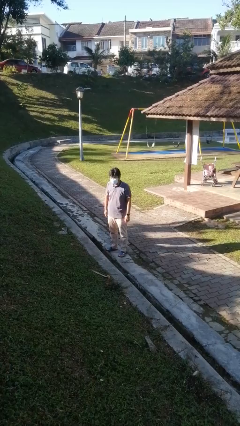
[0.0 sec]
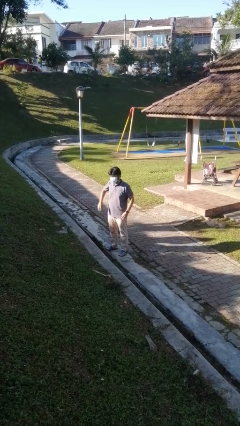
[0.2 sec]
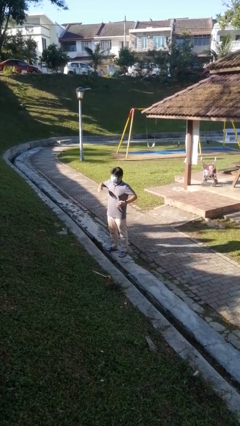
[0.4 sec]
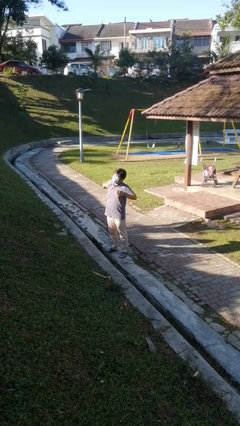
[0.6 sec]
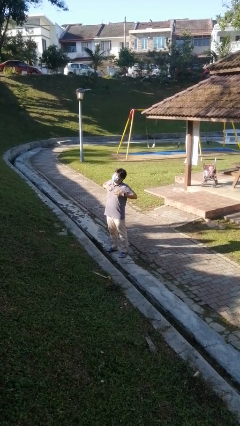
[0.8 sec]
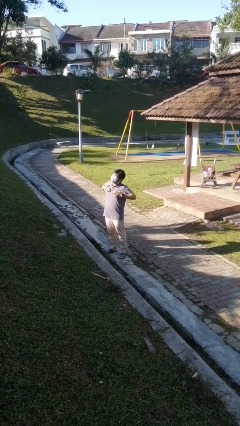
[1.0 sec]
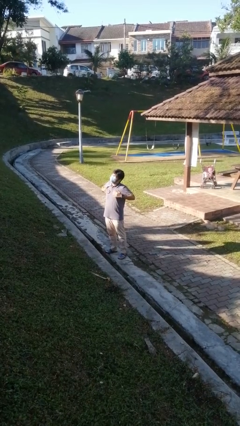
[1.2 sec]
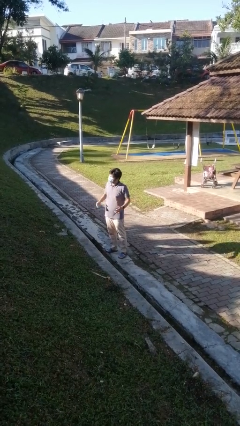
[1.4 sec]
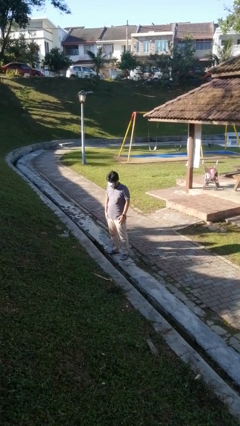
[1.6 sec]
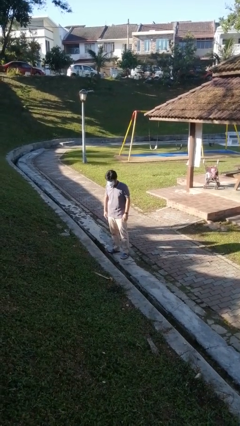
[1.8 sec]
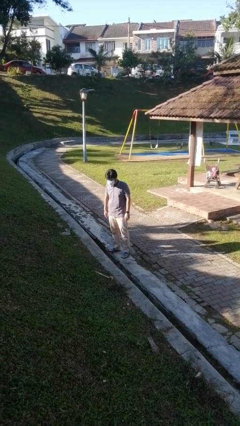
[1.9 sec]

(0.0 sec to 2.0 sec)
person drums on chest

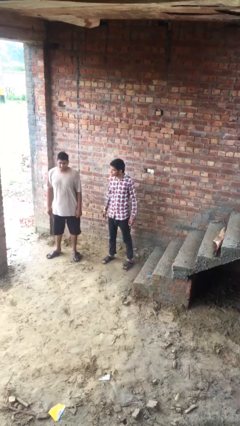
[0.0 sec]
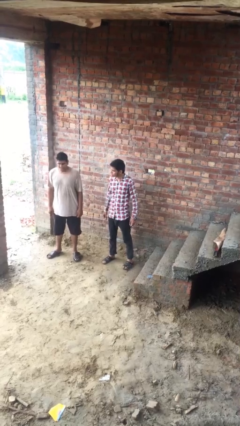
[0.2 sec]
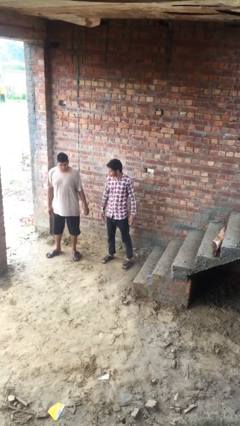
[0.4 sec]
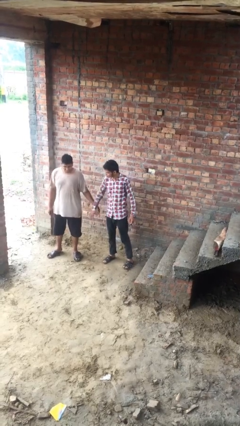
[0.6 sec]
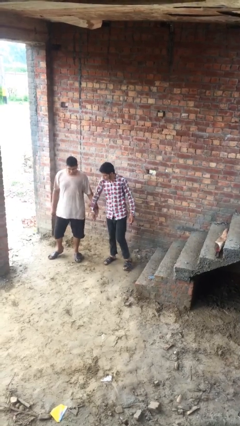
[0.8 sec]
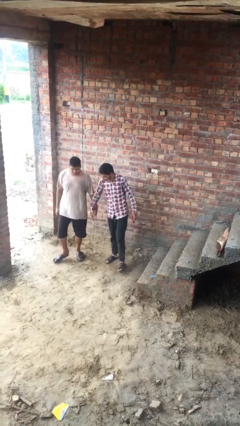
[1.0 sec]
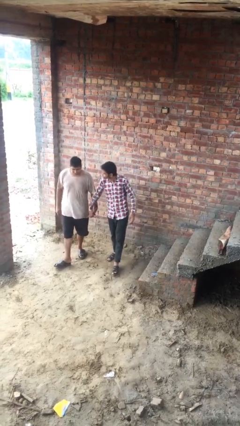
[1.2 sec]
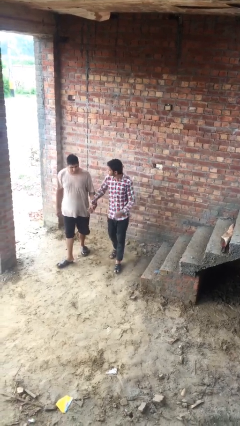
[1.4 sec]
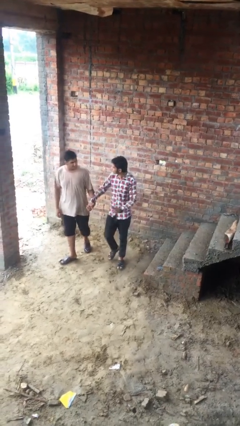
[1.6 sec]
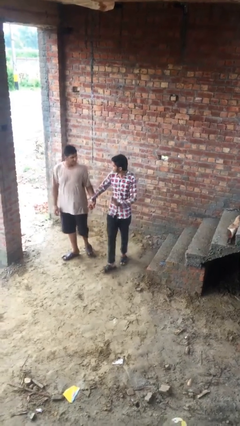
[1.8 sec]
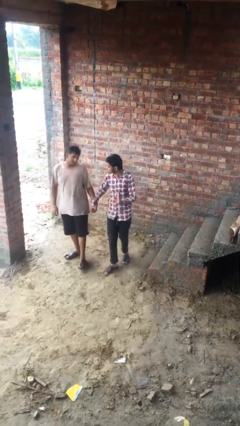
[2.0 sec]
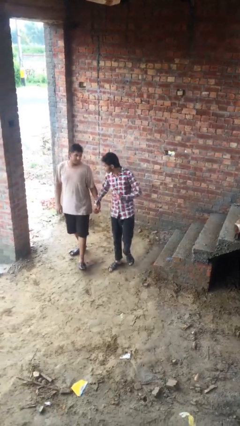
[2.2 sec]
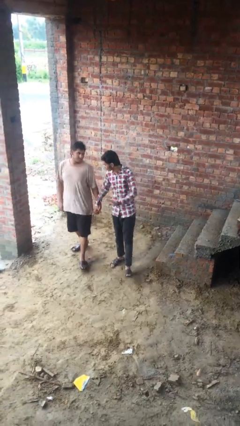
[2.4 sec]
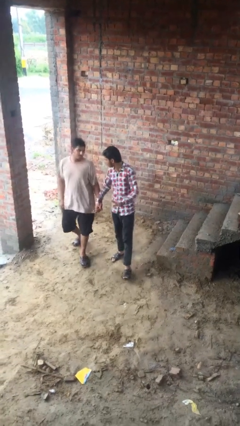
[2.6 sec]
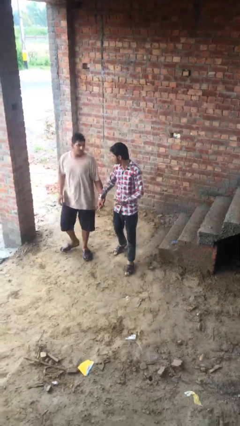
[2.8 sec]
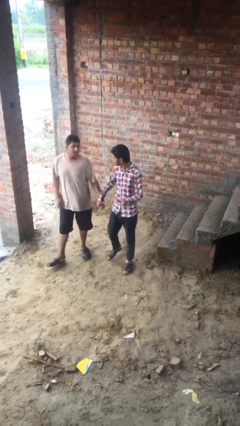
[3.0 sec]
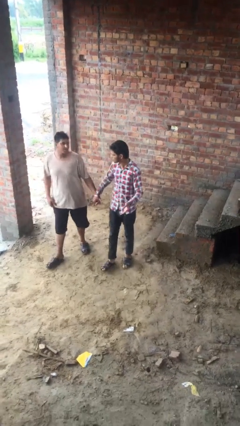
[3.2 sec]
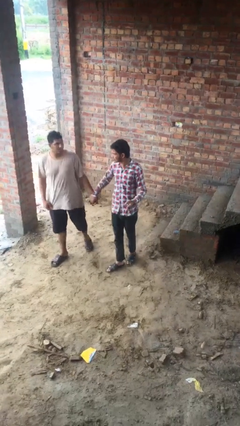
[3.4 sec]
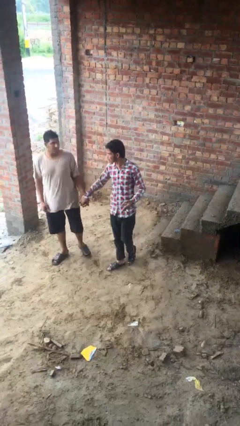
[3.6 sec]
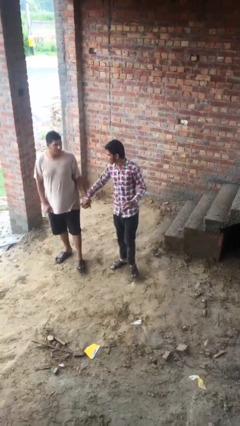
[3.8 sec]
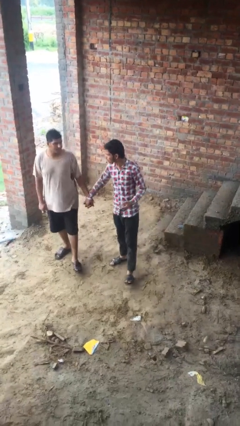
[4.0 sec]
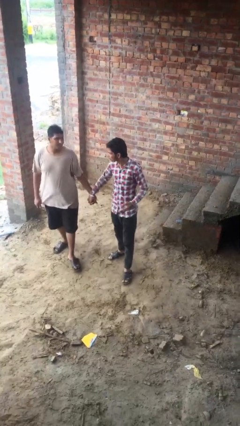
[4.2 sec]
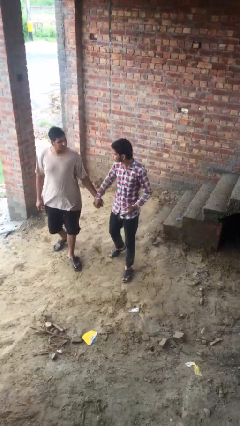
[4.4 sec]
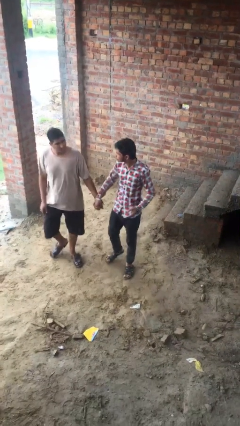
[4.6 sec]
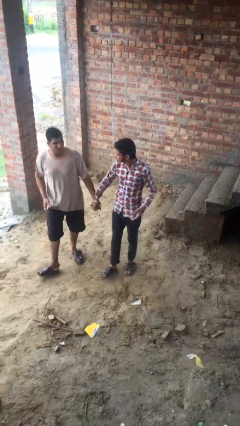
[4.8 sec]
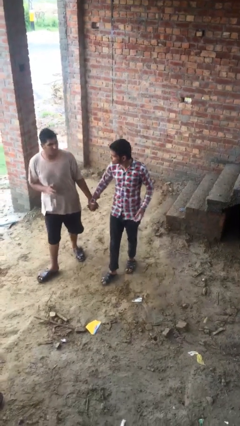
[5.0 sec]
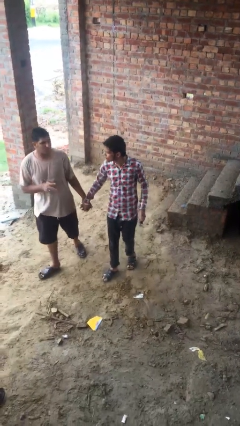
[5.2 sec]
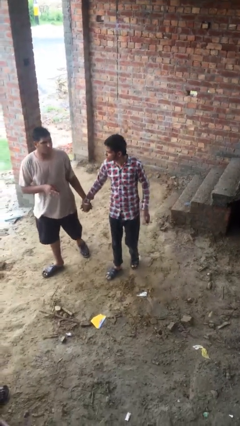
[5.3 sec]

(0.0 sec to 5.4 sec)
person holds hand

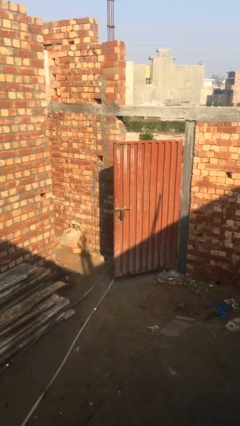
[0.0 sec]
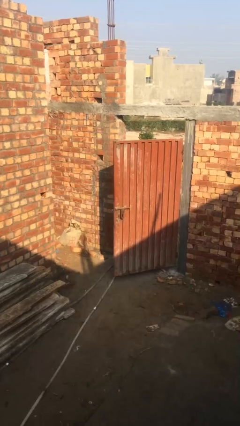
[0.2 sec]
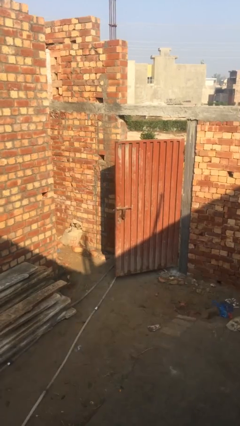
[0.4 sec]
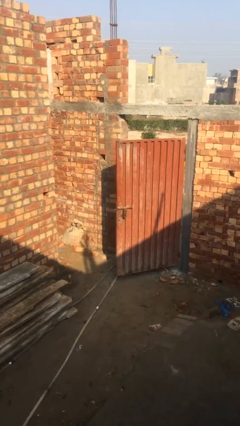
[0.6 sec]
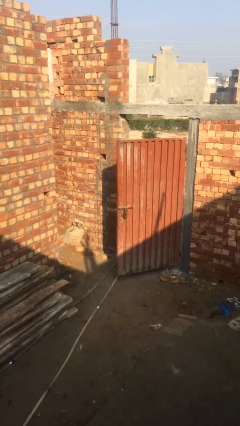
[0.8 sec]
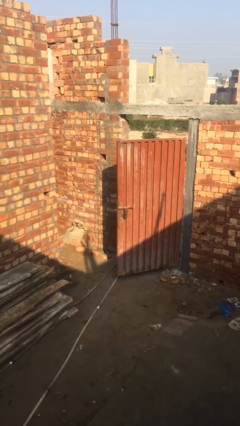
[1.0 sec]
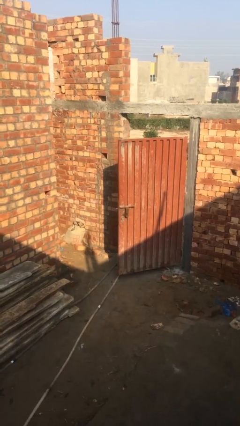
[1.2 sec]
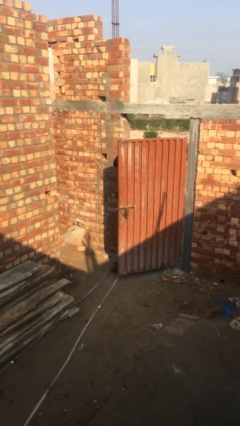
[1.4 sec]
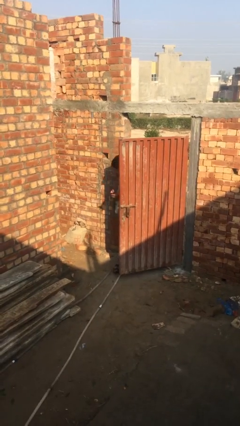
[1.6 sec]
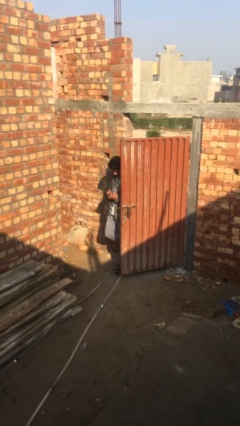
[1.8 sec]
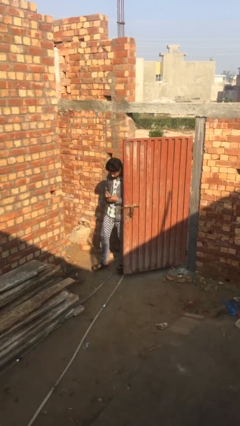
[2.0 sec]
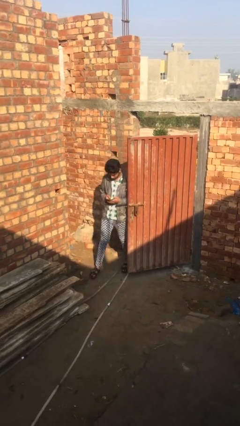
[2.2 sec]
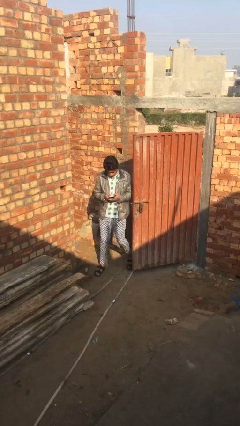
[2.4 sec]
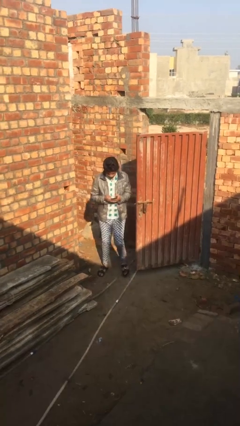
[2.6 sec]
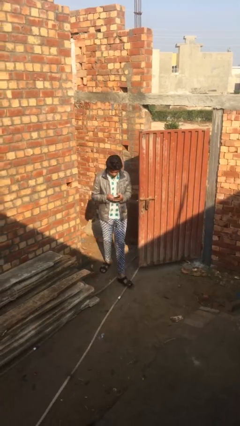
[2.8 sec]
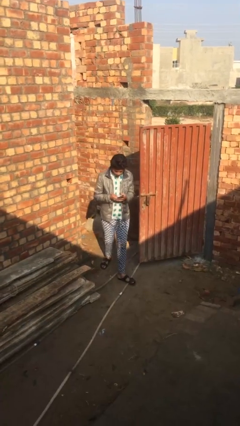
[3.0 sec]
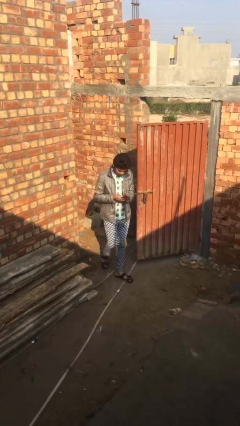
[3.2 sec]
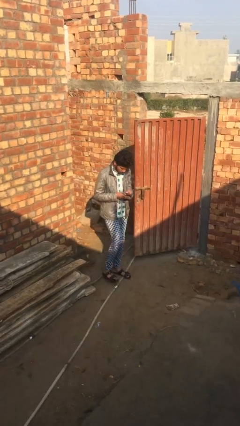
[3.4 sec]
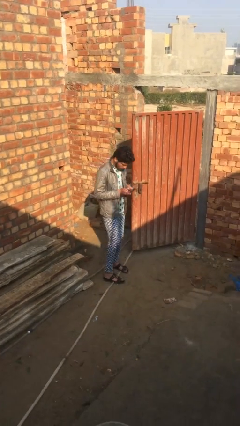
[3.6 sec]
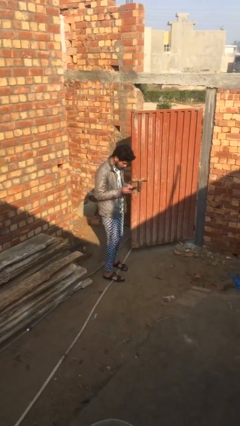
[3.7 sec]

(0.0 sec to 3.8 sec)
person enters scene through structure

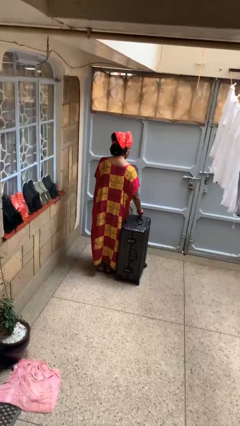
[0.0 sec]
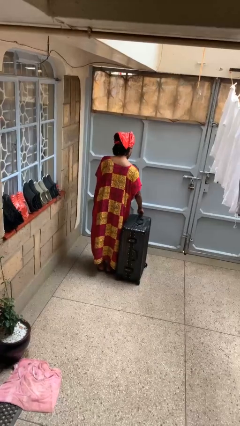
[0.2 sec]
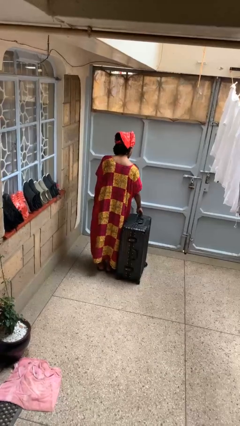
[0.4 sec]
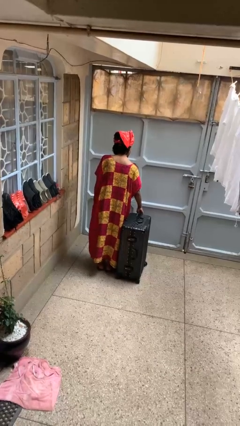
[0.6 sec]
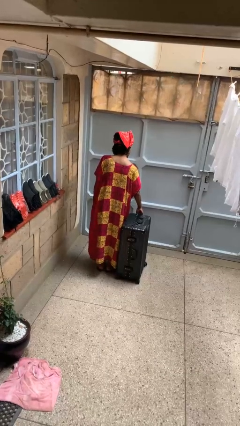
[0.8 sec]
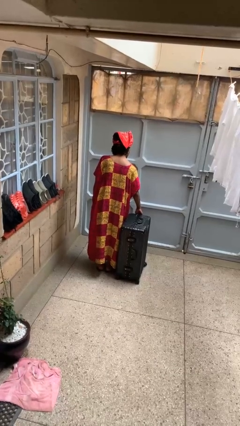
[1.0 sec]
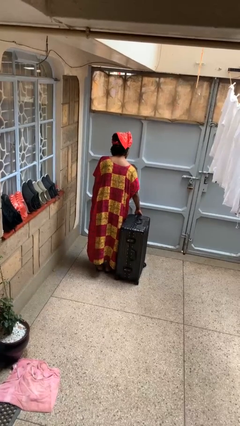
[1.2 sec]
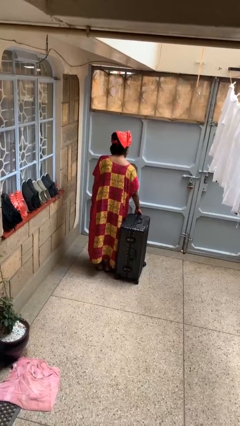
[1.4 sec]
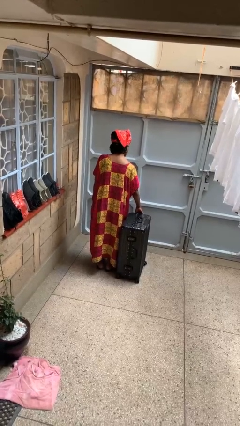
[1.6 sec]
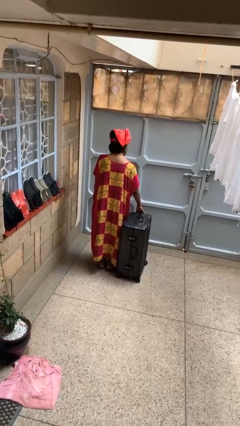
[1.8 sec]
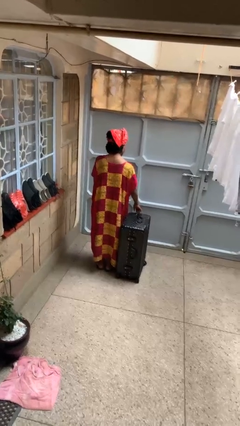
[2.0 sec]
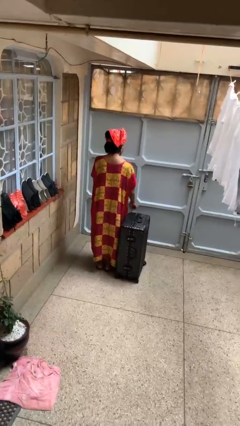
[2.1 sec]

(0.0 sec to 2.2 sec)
person closes suitcase

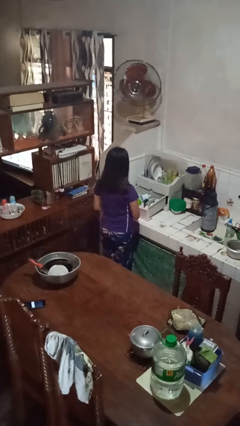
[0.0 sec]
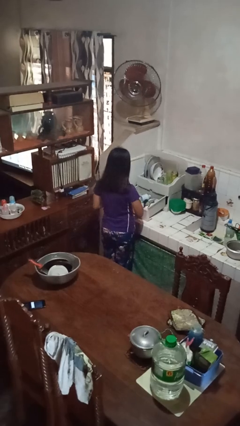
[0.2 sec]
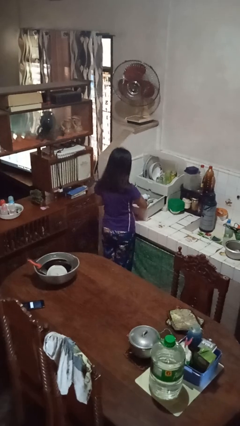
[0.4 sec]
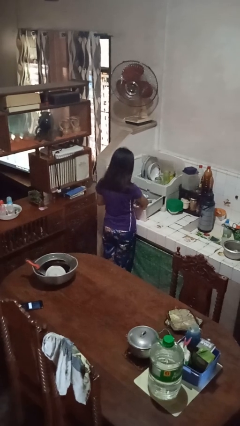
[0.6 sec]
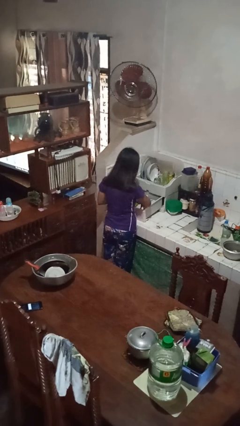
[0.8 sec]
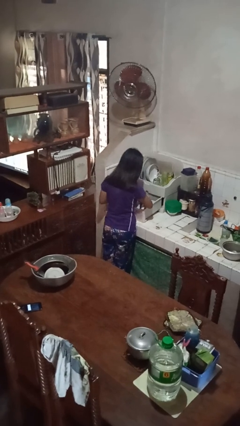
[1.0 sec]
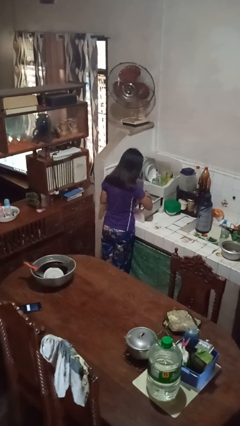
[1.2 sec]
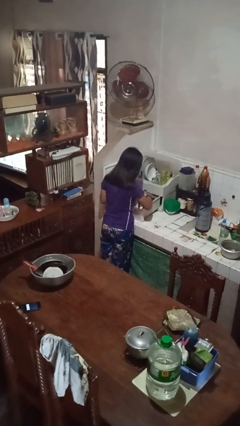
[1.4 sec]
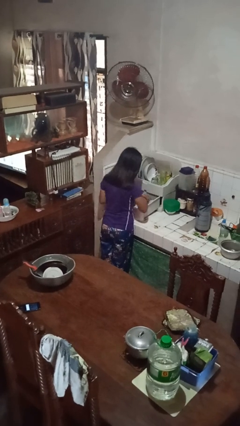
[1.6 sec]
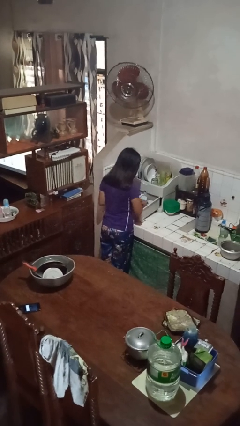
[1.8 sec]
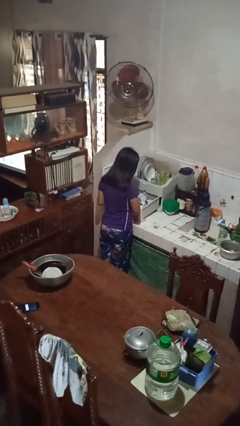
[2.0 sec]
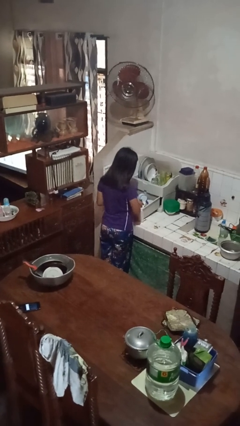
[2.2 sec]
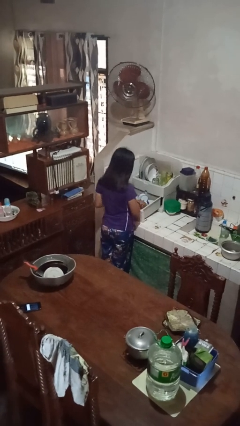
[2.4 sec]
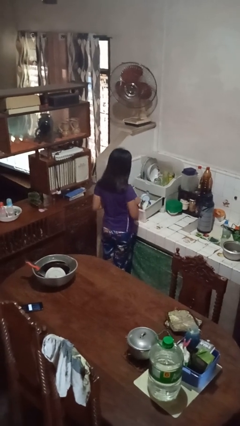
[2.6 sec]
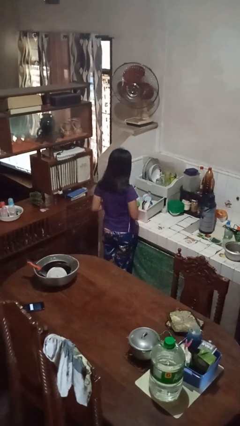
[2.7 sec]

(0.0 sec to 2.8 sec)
person searches in kitchen drawer

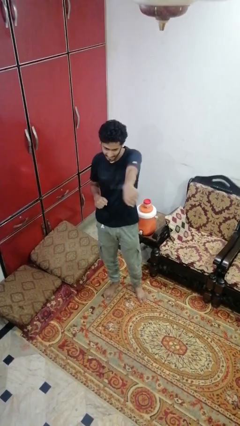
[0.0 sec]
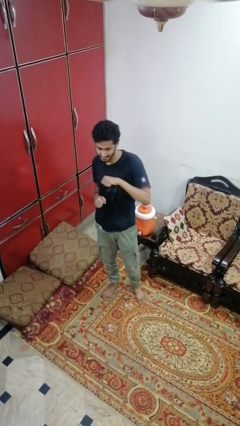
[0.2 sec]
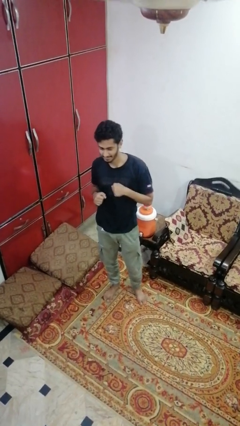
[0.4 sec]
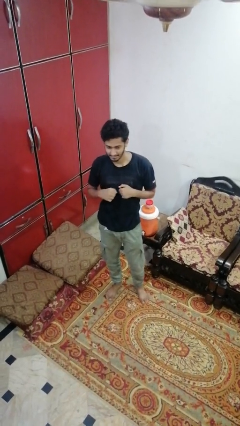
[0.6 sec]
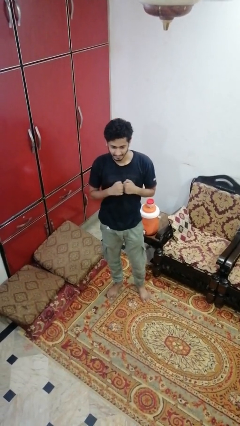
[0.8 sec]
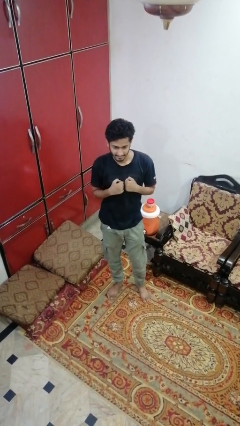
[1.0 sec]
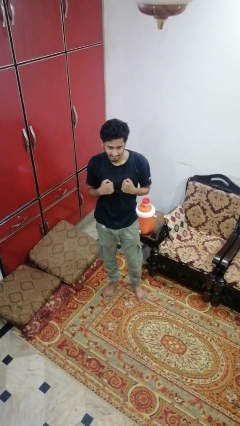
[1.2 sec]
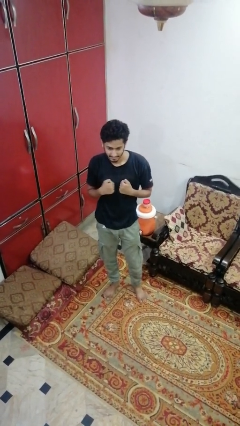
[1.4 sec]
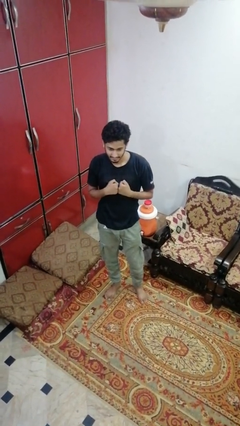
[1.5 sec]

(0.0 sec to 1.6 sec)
person punches
